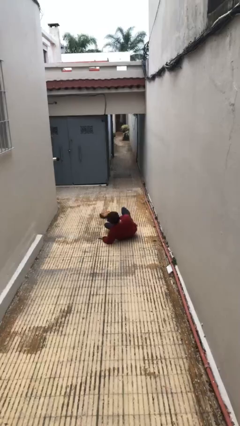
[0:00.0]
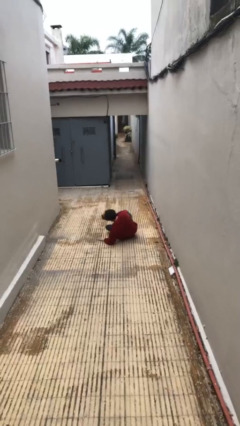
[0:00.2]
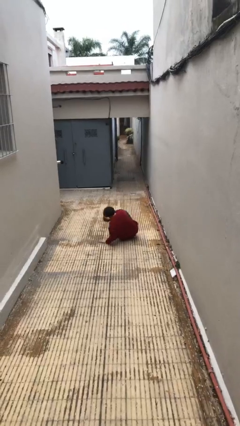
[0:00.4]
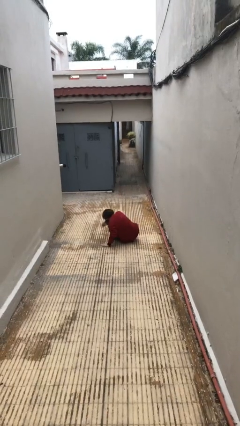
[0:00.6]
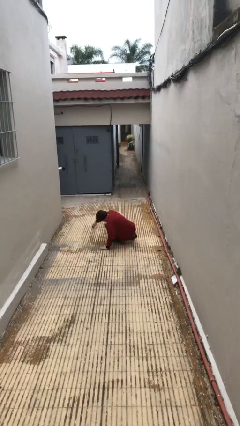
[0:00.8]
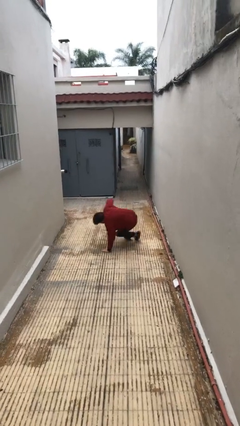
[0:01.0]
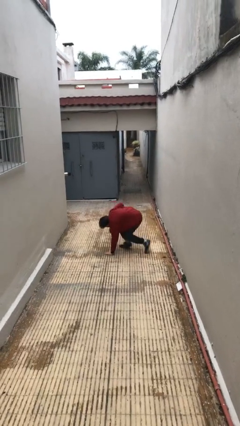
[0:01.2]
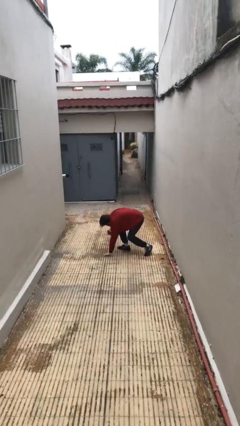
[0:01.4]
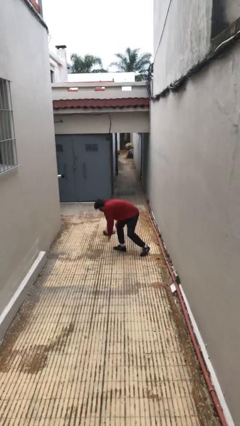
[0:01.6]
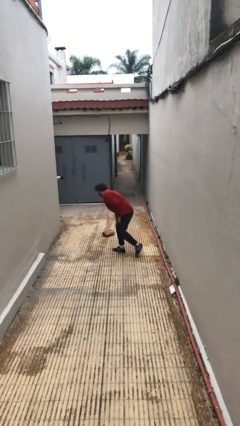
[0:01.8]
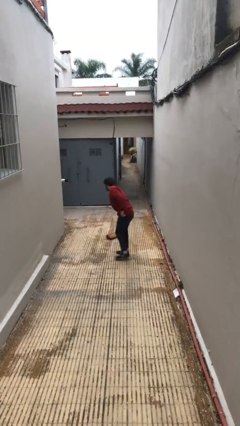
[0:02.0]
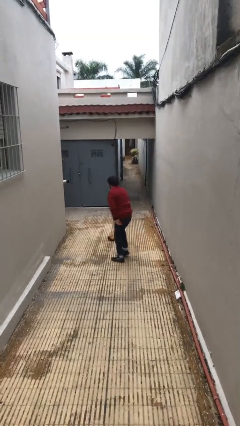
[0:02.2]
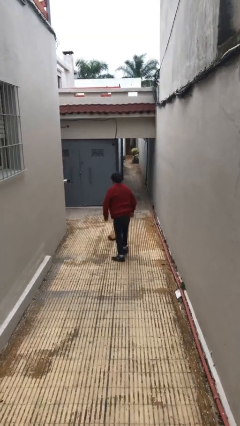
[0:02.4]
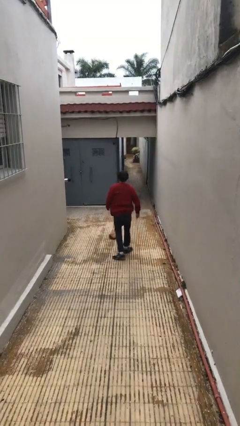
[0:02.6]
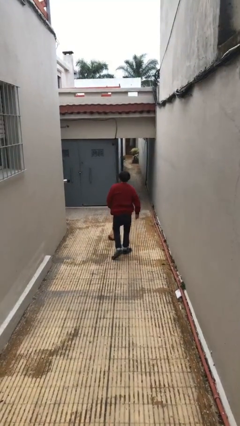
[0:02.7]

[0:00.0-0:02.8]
person stands up from floor

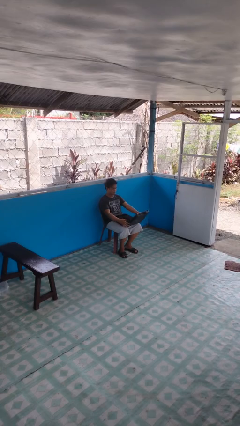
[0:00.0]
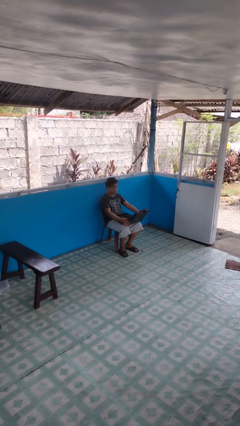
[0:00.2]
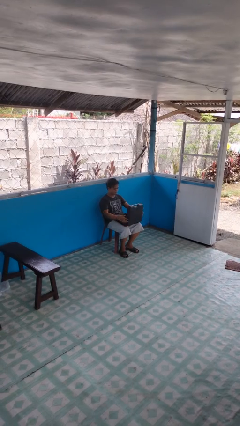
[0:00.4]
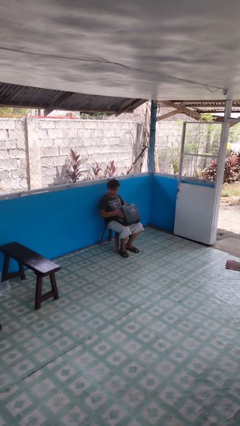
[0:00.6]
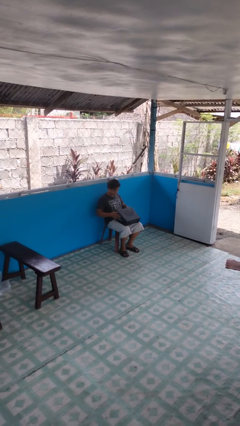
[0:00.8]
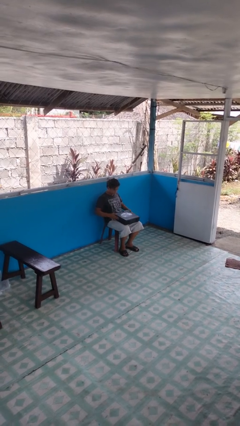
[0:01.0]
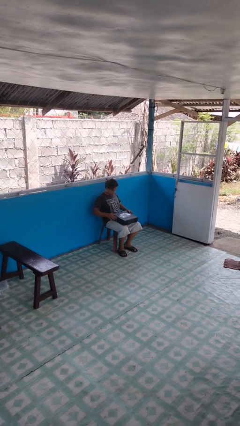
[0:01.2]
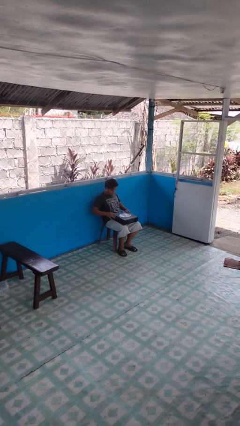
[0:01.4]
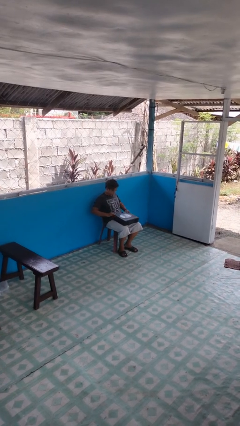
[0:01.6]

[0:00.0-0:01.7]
person closes suitcase

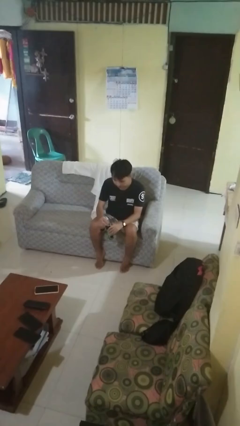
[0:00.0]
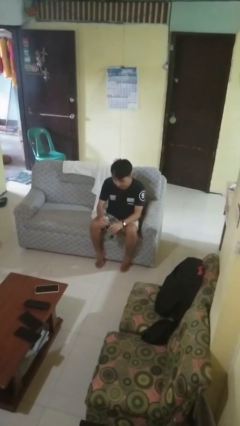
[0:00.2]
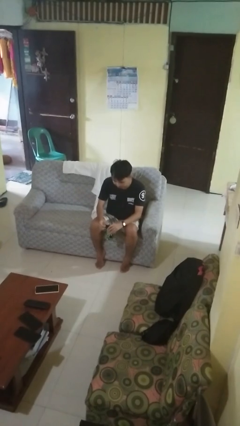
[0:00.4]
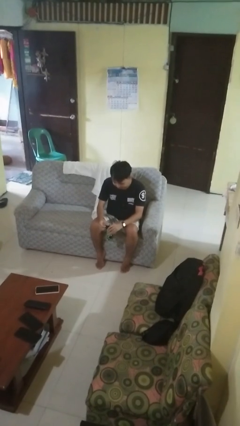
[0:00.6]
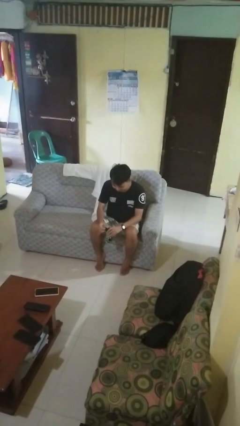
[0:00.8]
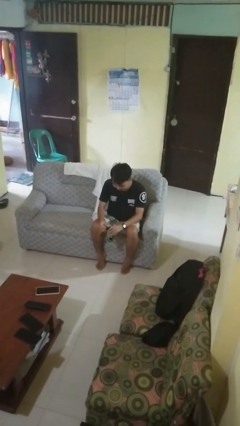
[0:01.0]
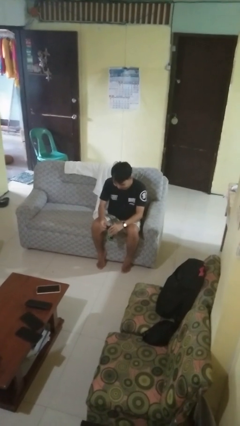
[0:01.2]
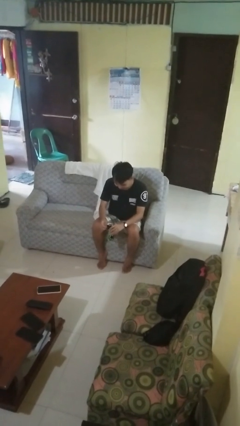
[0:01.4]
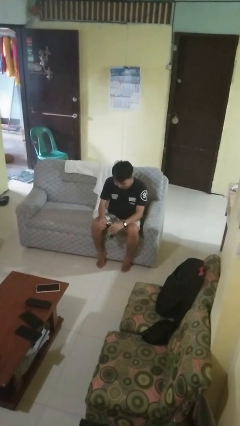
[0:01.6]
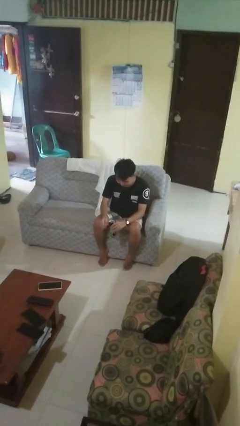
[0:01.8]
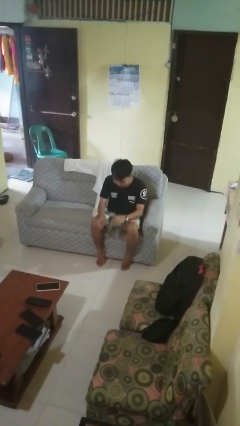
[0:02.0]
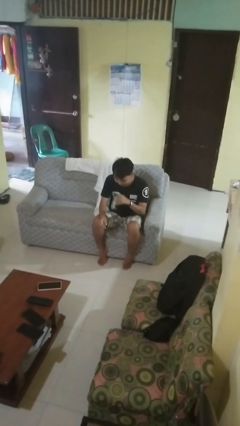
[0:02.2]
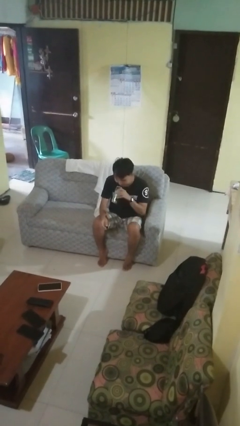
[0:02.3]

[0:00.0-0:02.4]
person opens beverage can

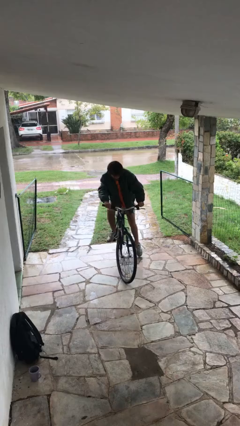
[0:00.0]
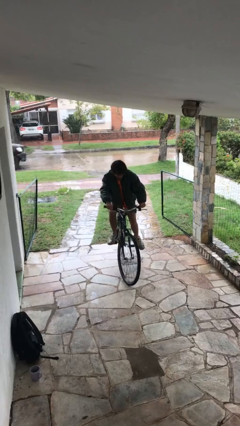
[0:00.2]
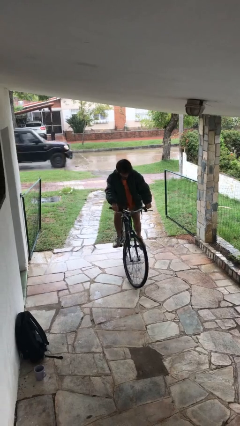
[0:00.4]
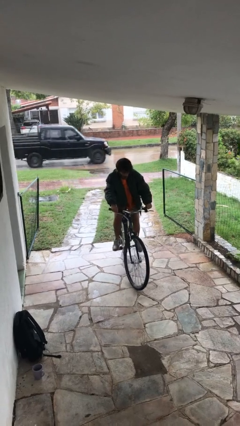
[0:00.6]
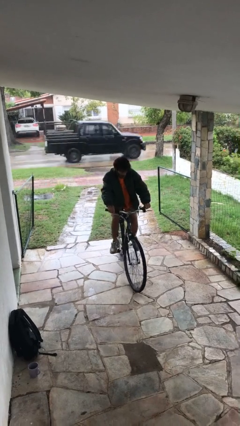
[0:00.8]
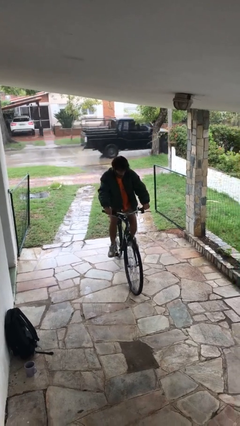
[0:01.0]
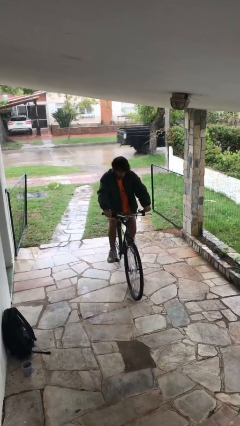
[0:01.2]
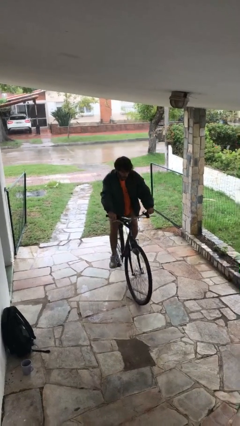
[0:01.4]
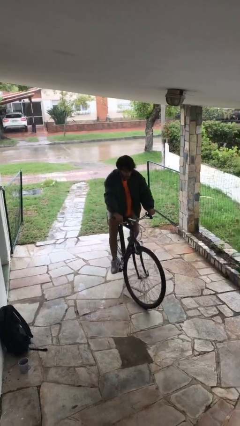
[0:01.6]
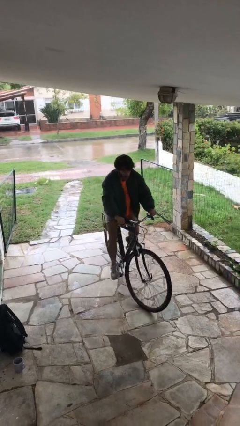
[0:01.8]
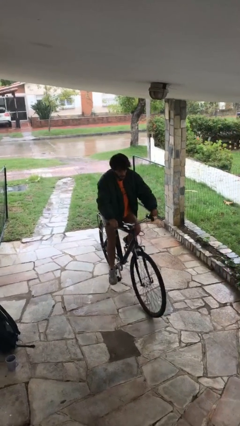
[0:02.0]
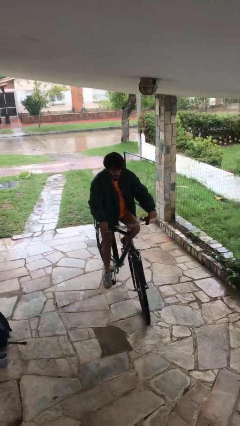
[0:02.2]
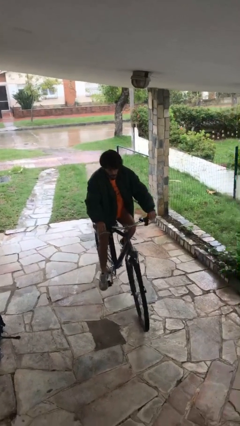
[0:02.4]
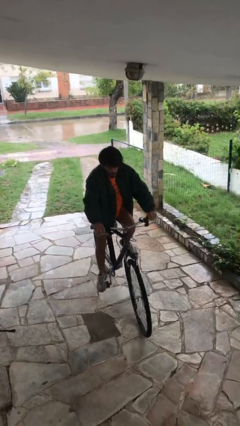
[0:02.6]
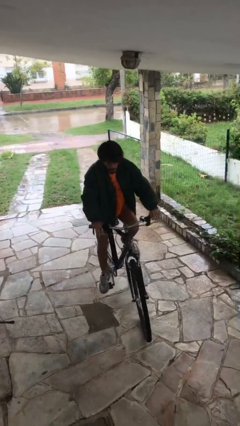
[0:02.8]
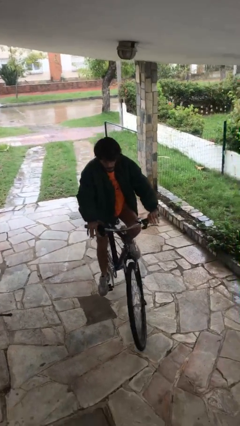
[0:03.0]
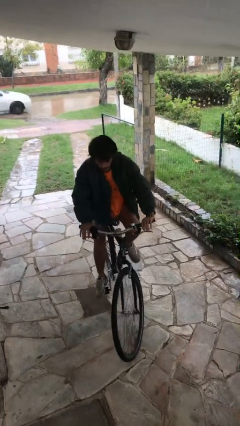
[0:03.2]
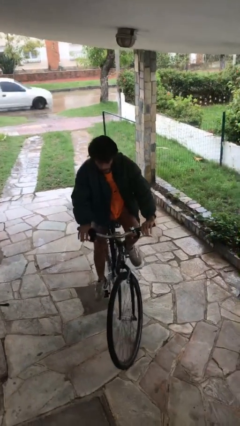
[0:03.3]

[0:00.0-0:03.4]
person rides bicycle

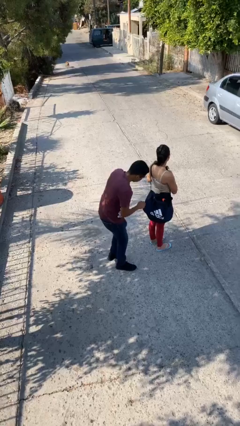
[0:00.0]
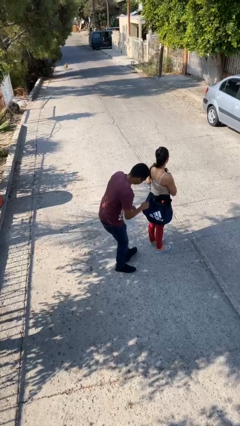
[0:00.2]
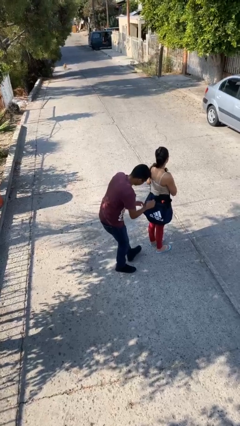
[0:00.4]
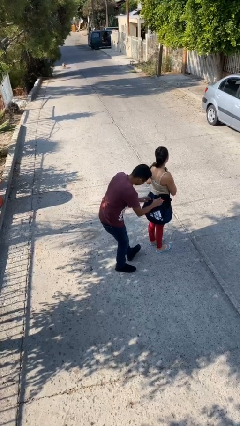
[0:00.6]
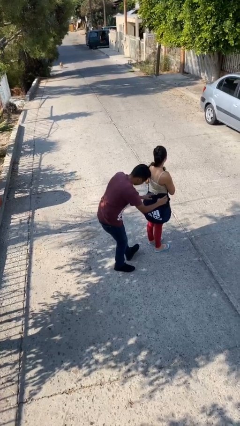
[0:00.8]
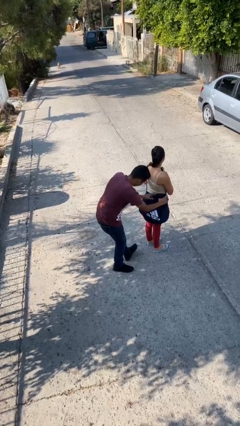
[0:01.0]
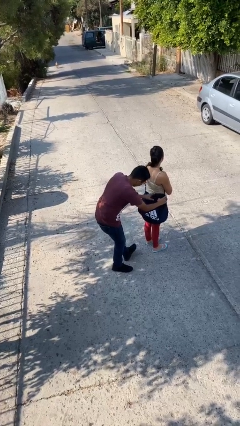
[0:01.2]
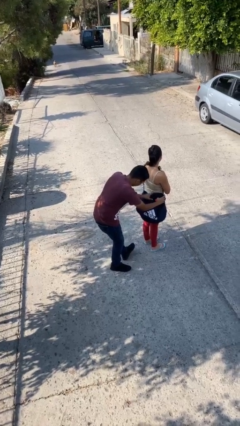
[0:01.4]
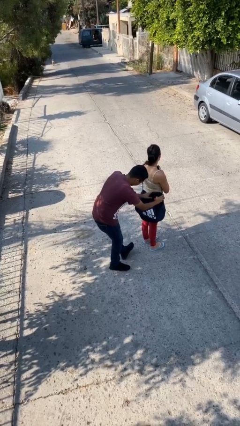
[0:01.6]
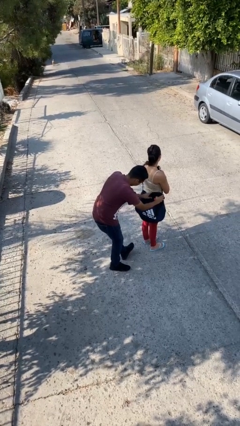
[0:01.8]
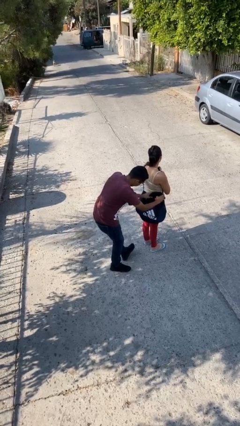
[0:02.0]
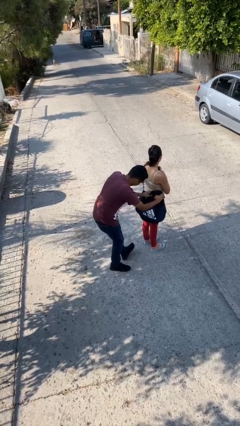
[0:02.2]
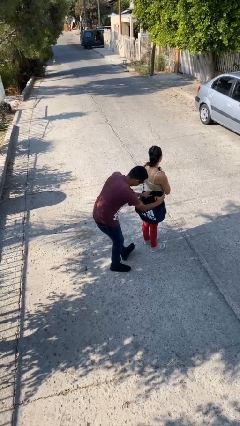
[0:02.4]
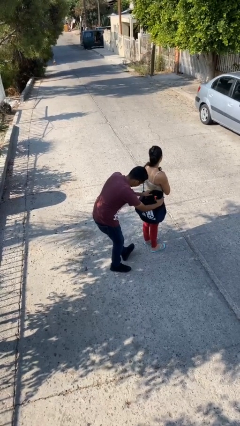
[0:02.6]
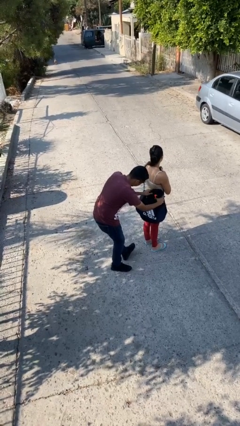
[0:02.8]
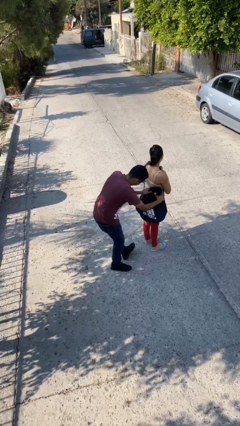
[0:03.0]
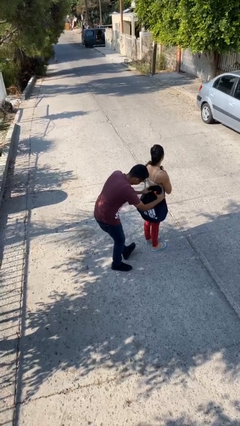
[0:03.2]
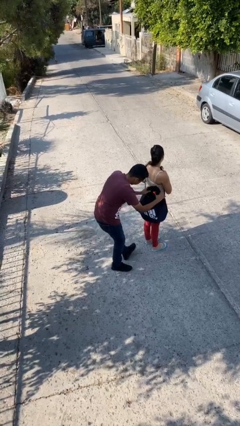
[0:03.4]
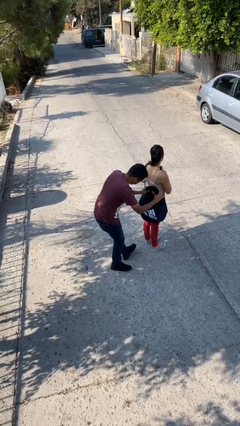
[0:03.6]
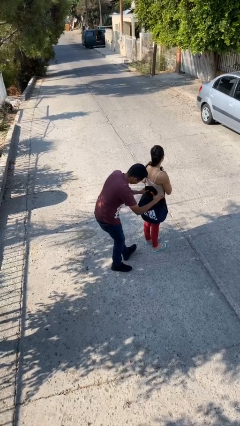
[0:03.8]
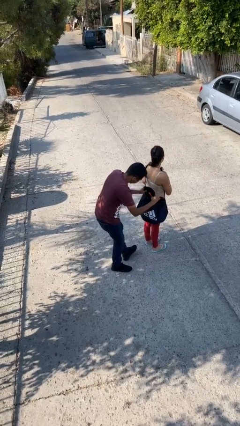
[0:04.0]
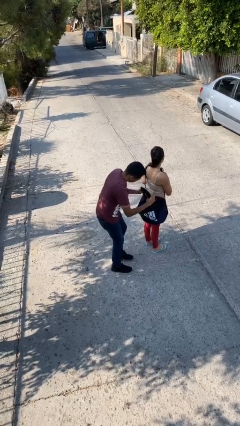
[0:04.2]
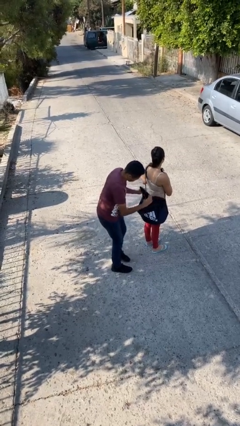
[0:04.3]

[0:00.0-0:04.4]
person steals object from person

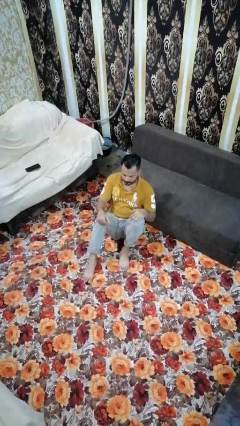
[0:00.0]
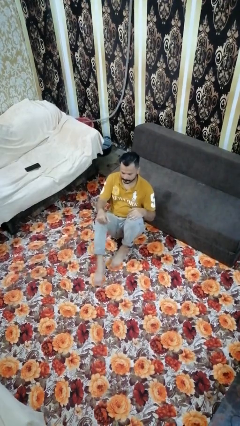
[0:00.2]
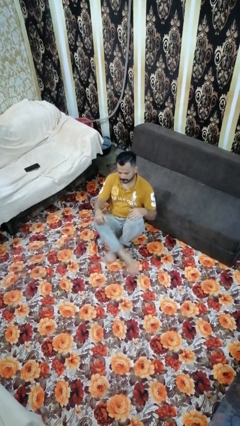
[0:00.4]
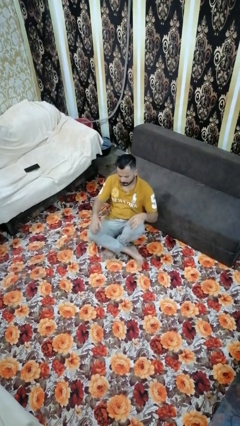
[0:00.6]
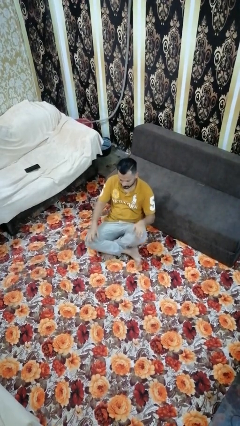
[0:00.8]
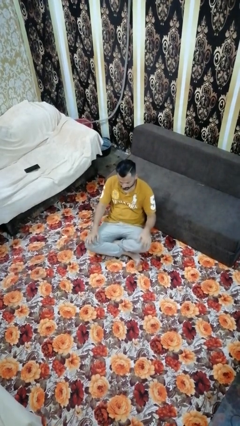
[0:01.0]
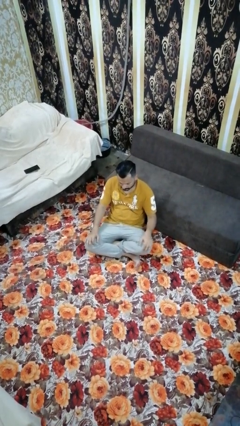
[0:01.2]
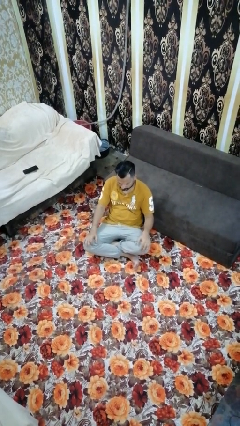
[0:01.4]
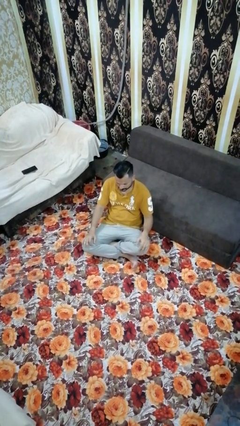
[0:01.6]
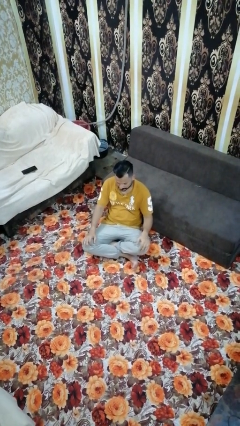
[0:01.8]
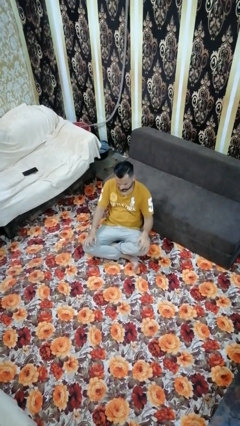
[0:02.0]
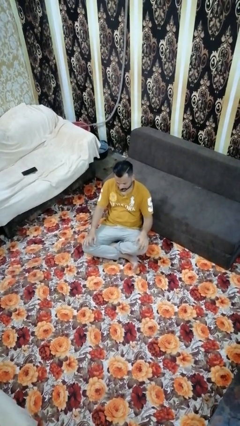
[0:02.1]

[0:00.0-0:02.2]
person crosses legs
